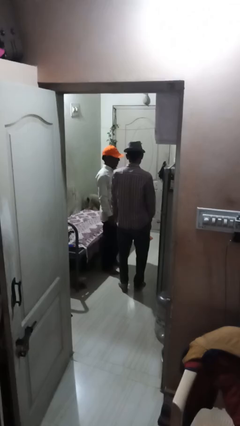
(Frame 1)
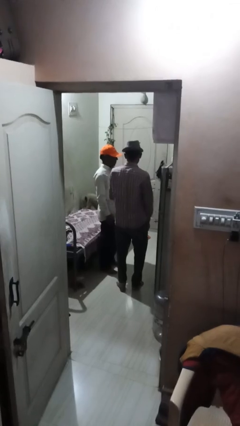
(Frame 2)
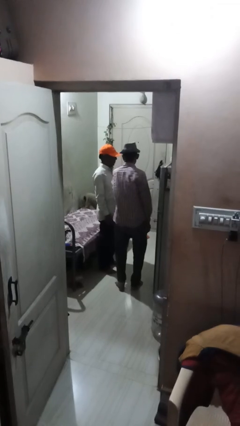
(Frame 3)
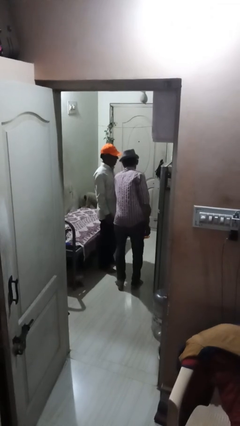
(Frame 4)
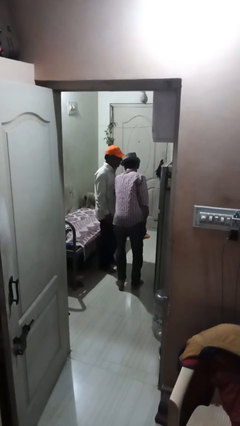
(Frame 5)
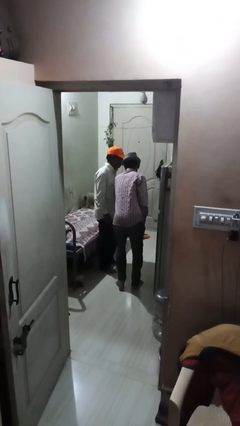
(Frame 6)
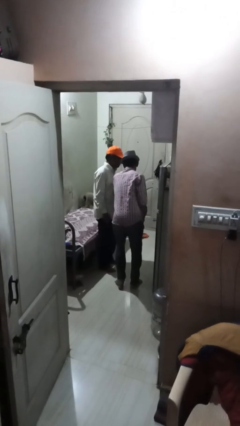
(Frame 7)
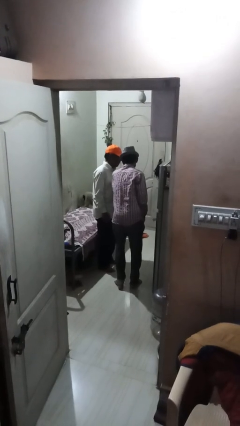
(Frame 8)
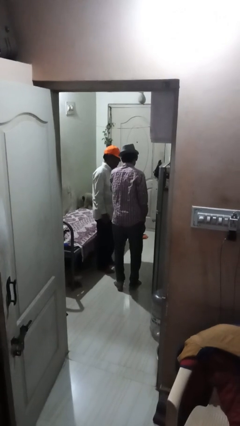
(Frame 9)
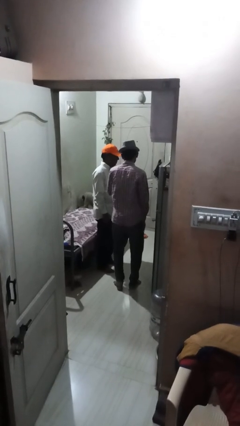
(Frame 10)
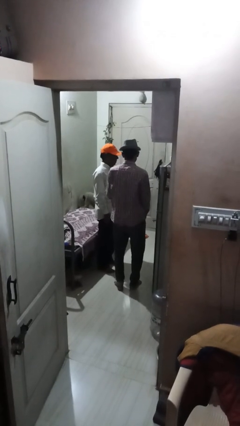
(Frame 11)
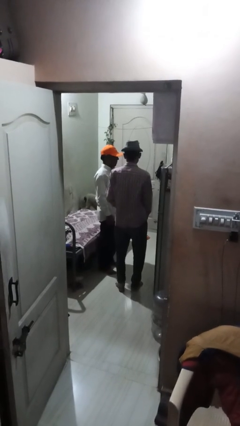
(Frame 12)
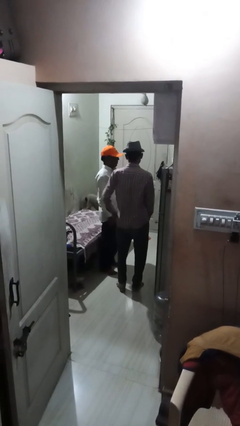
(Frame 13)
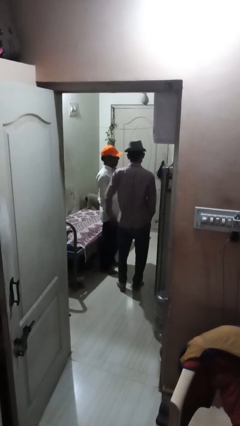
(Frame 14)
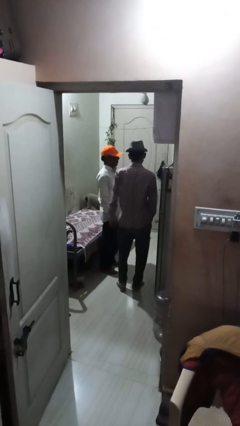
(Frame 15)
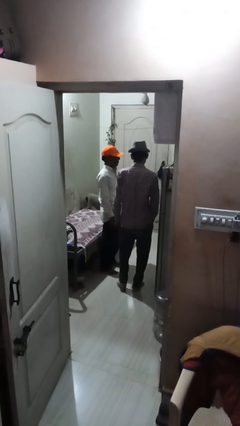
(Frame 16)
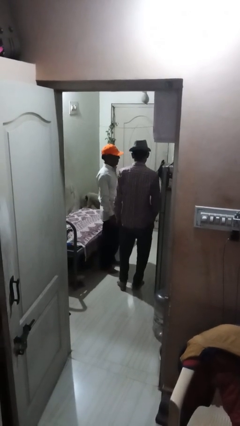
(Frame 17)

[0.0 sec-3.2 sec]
person nudges person with elbow

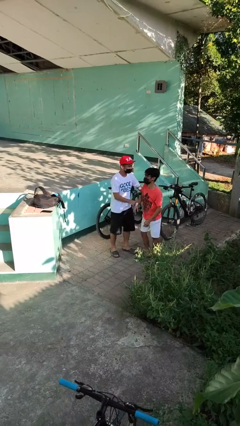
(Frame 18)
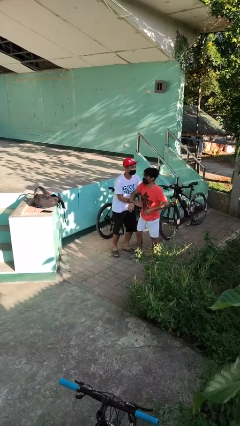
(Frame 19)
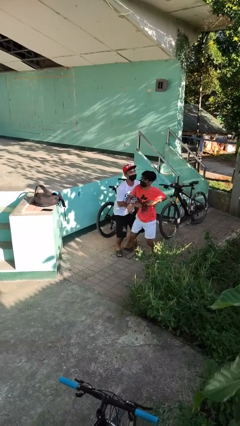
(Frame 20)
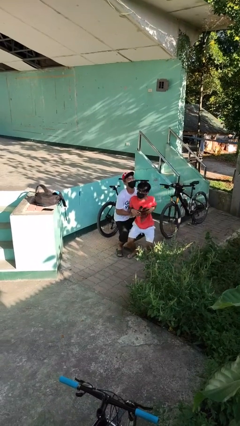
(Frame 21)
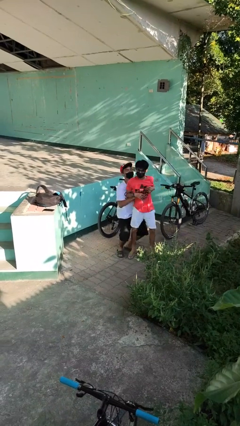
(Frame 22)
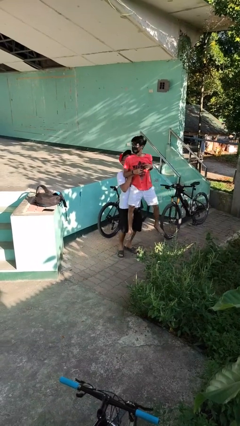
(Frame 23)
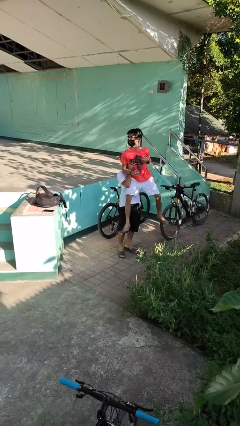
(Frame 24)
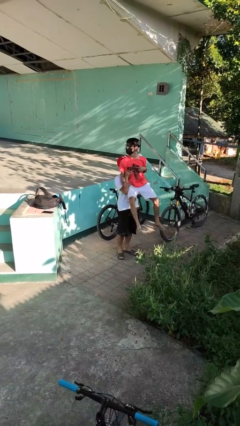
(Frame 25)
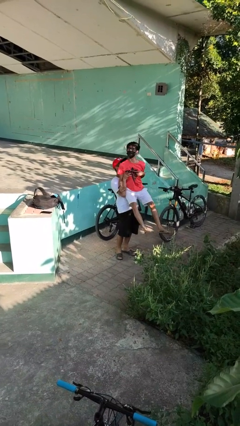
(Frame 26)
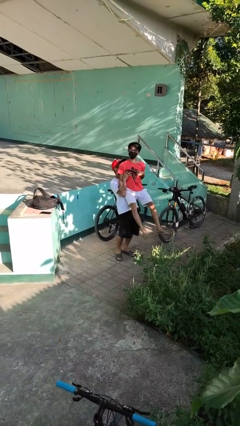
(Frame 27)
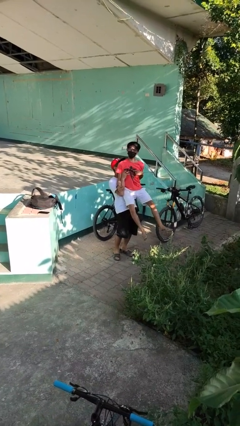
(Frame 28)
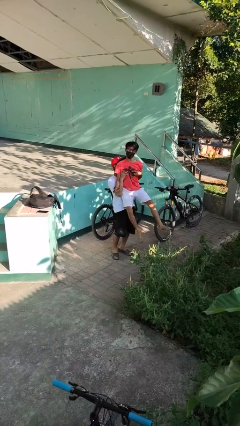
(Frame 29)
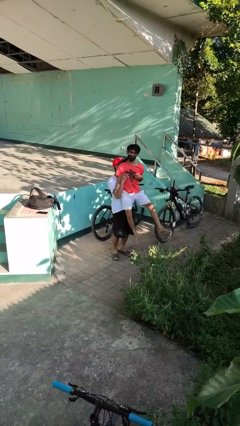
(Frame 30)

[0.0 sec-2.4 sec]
person picks up person

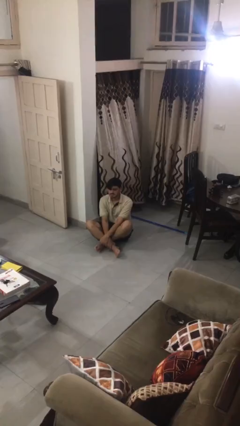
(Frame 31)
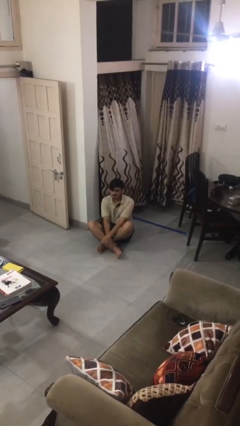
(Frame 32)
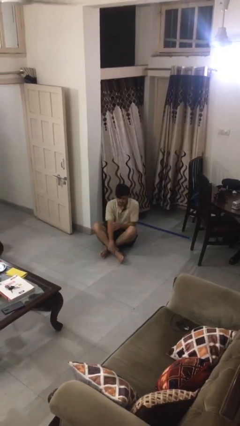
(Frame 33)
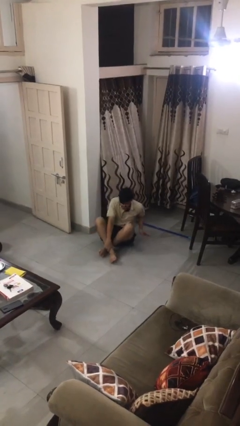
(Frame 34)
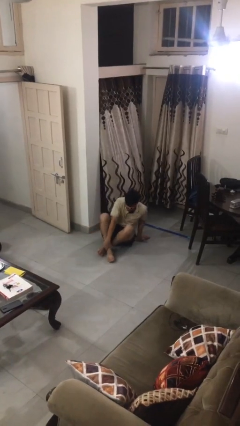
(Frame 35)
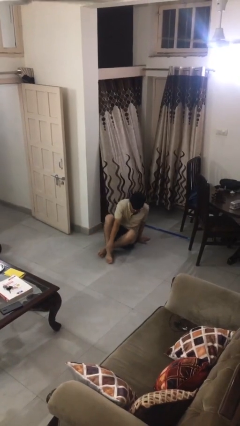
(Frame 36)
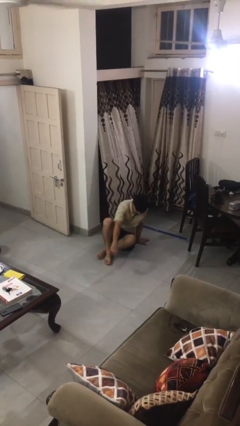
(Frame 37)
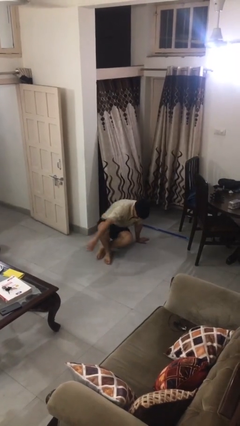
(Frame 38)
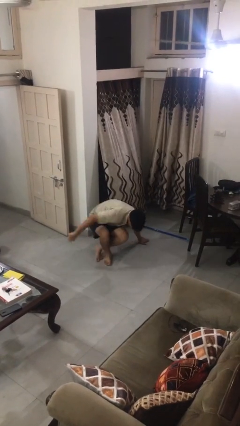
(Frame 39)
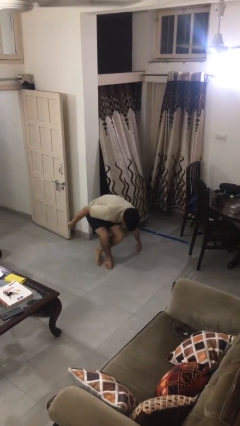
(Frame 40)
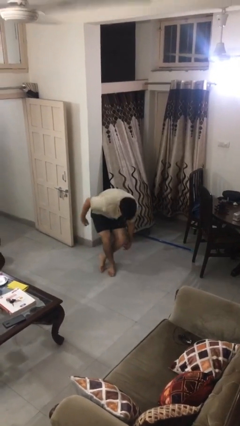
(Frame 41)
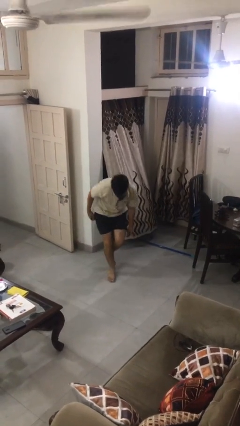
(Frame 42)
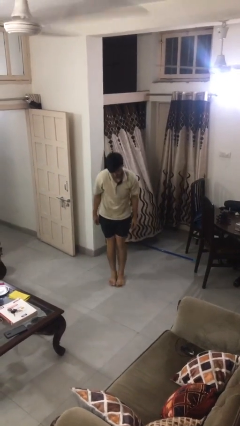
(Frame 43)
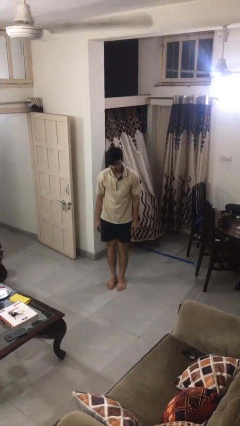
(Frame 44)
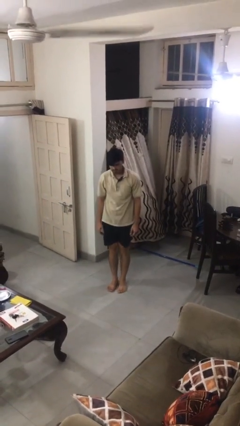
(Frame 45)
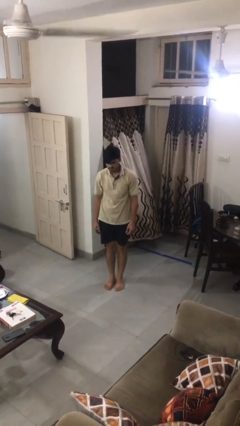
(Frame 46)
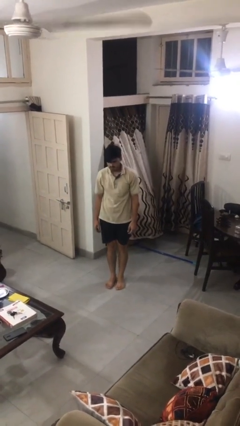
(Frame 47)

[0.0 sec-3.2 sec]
person stands up from floor

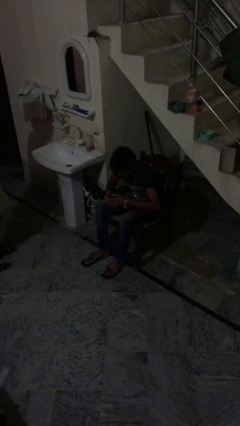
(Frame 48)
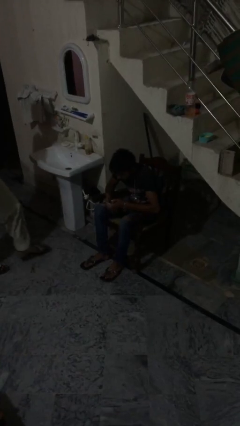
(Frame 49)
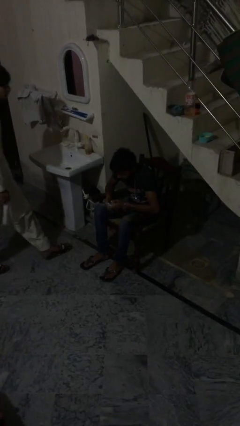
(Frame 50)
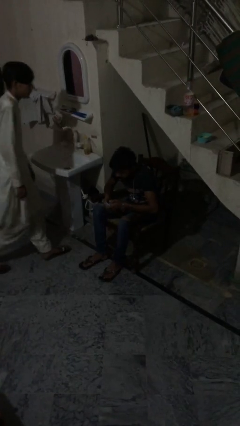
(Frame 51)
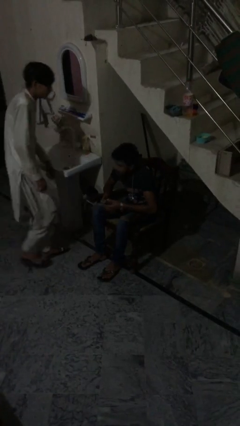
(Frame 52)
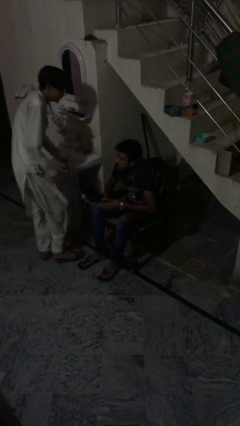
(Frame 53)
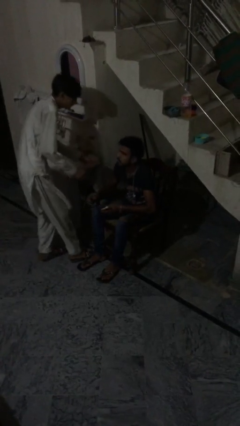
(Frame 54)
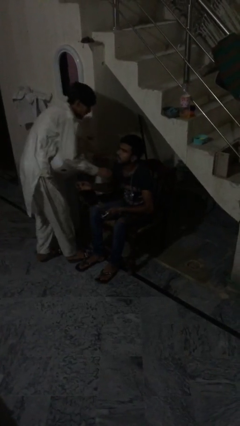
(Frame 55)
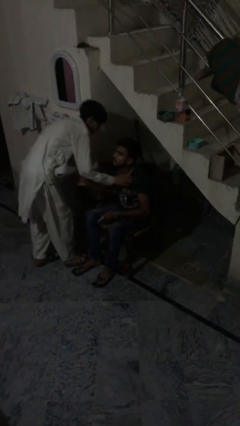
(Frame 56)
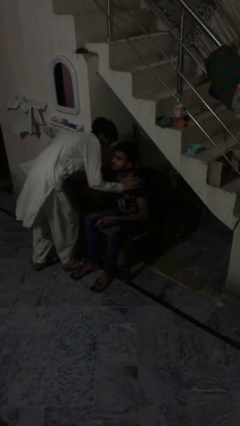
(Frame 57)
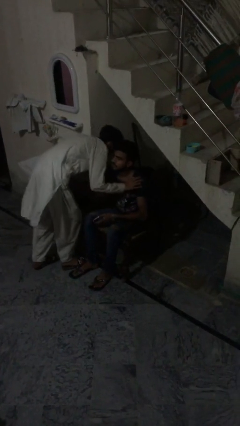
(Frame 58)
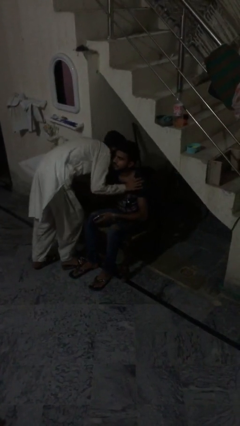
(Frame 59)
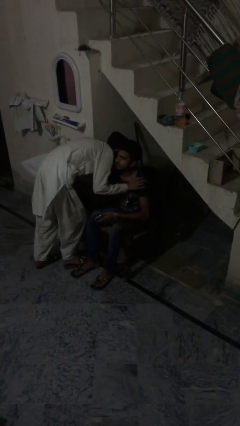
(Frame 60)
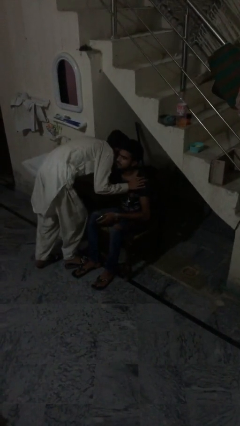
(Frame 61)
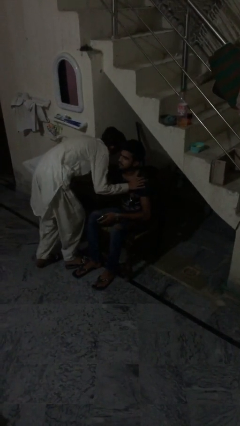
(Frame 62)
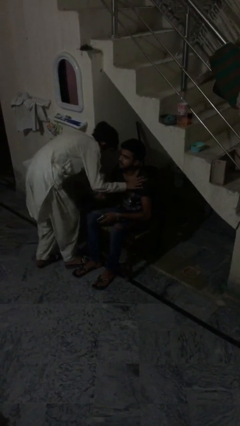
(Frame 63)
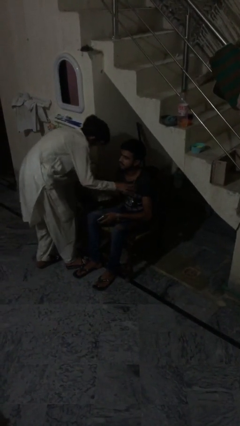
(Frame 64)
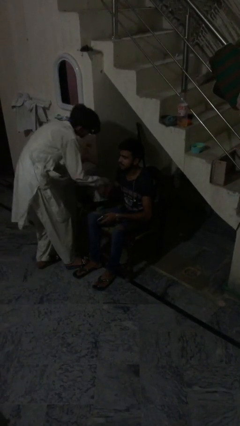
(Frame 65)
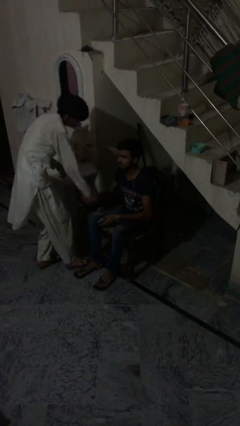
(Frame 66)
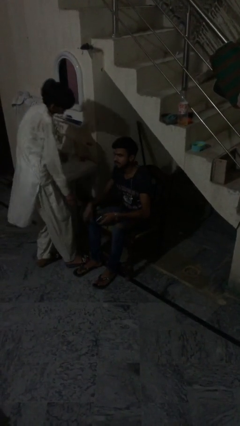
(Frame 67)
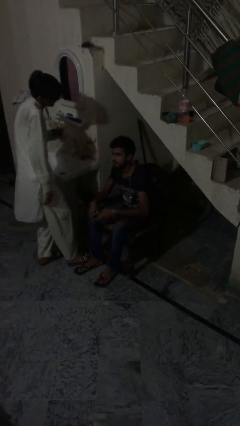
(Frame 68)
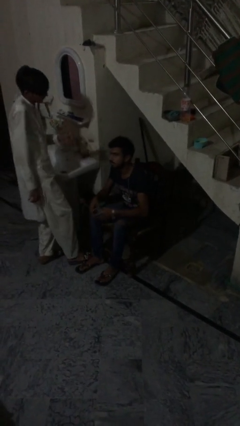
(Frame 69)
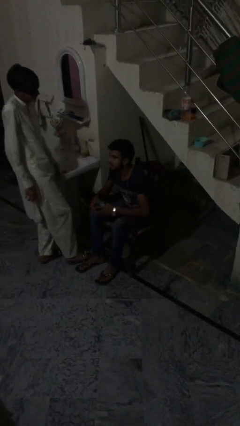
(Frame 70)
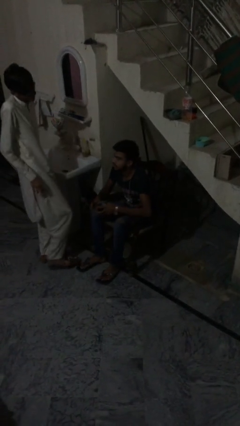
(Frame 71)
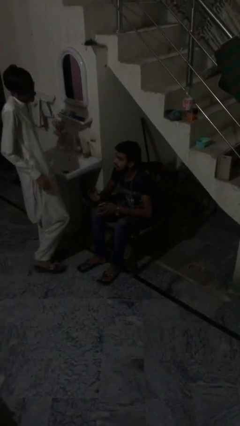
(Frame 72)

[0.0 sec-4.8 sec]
person embraces person

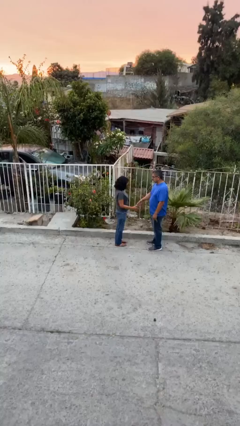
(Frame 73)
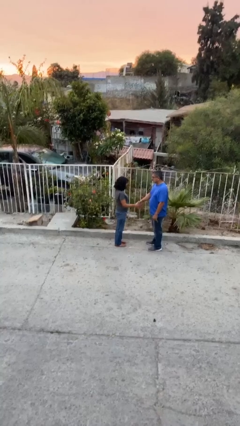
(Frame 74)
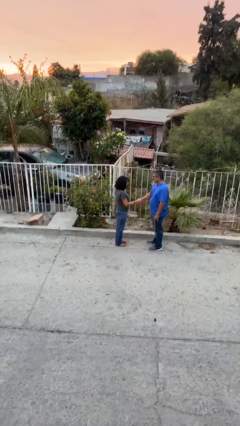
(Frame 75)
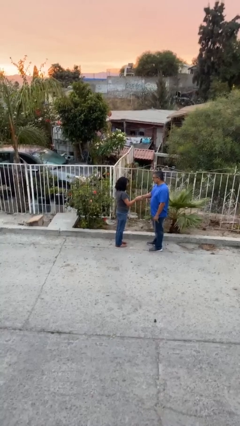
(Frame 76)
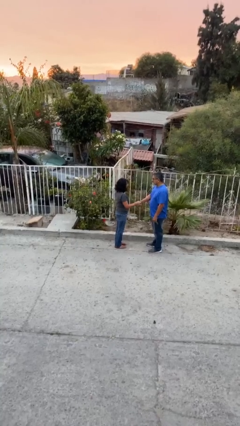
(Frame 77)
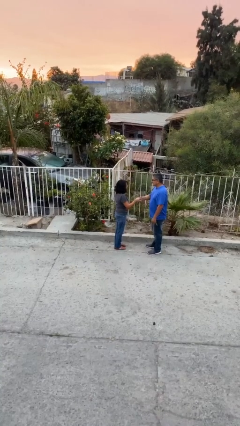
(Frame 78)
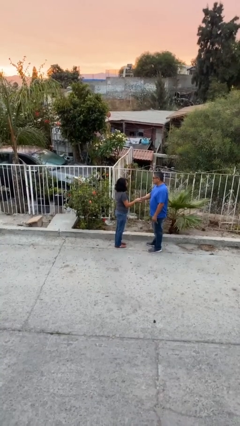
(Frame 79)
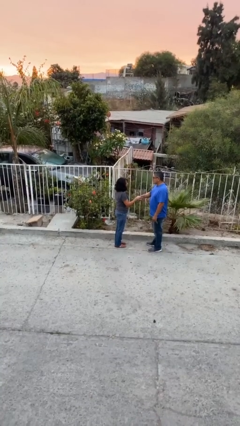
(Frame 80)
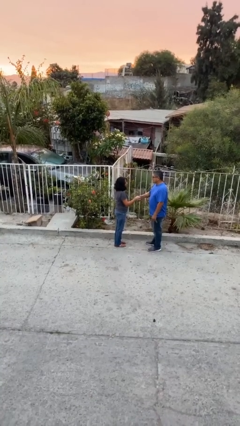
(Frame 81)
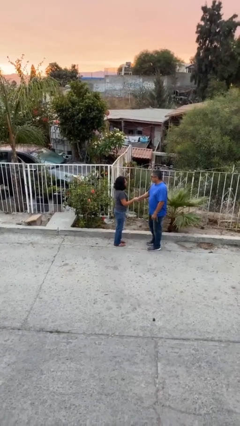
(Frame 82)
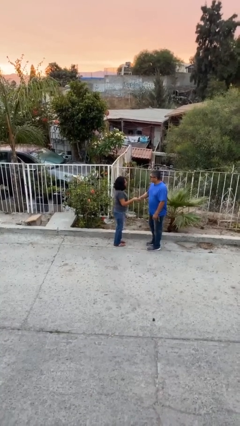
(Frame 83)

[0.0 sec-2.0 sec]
person shakes hand

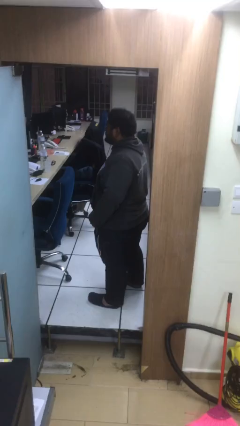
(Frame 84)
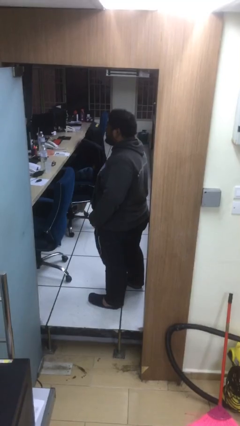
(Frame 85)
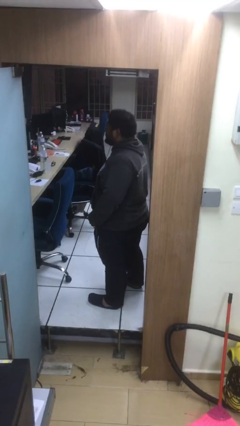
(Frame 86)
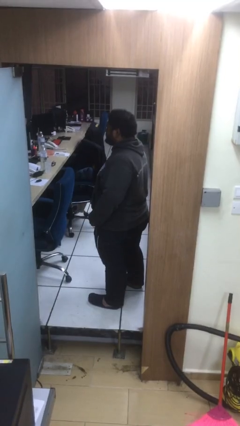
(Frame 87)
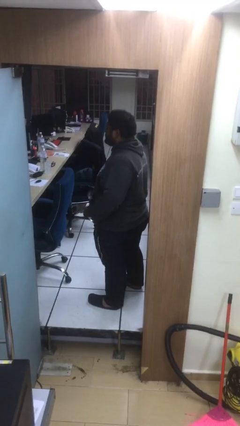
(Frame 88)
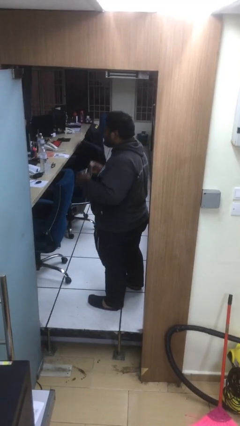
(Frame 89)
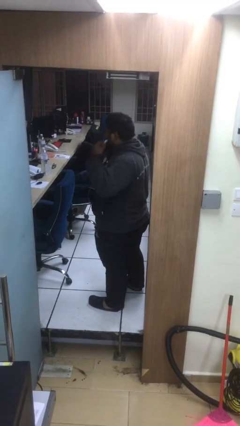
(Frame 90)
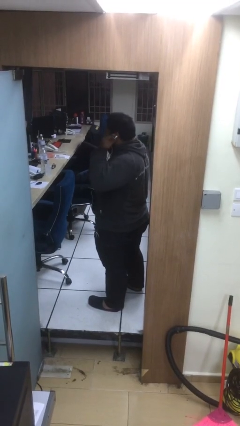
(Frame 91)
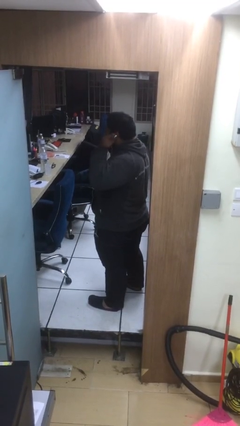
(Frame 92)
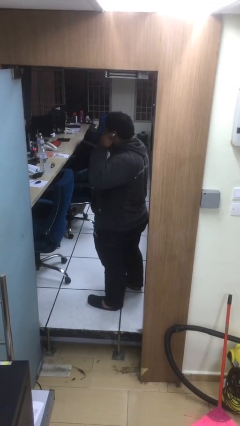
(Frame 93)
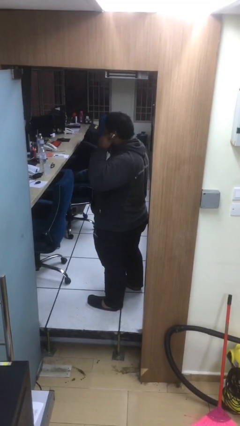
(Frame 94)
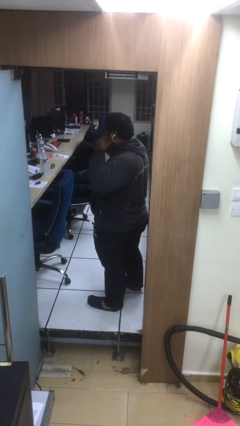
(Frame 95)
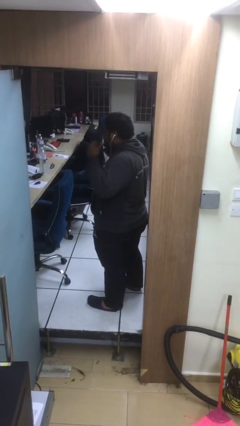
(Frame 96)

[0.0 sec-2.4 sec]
person puts on headphones
